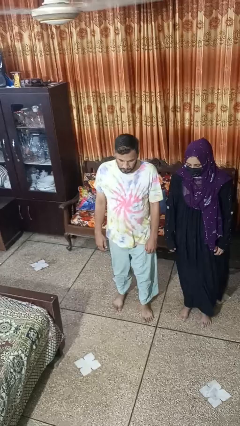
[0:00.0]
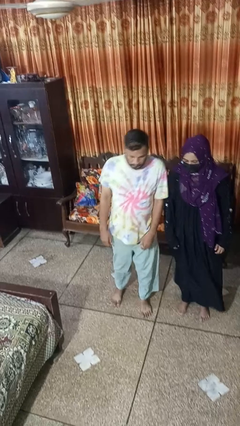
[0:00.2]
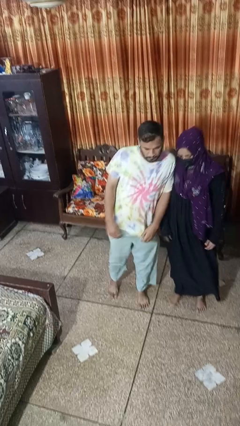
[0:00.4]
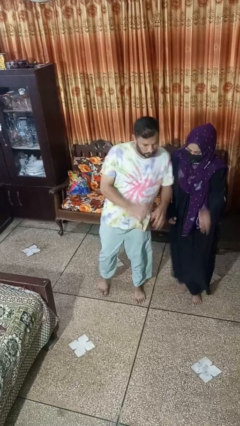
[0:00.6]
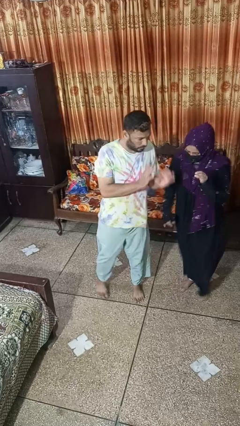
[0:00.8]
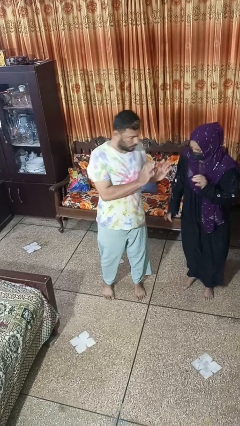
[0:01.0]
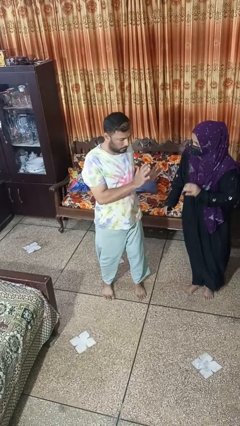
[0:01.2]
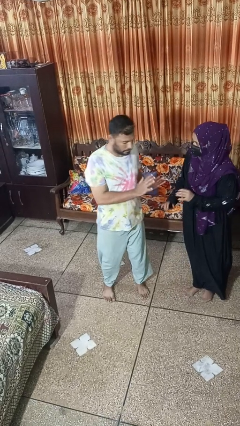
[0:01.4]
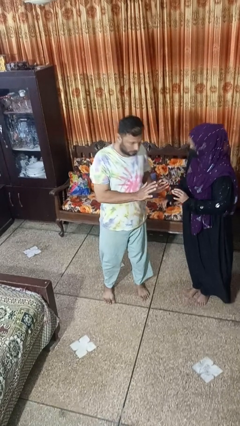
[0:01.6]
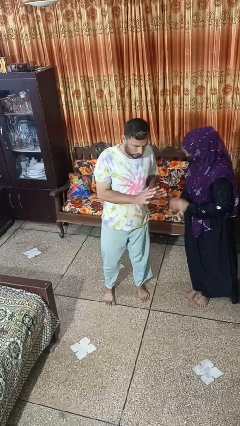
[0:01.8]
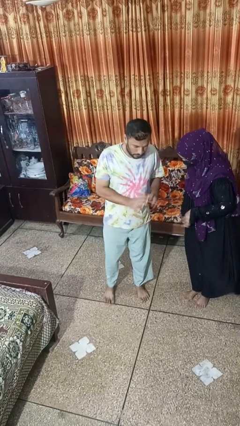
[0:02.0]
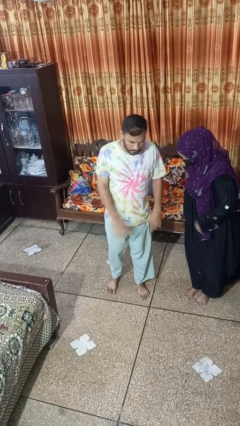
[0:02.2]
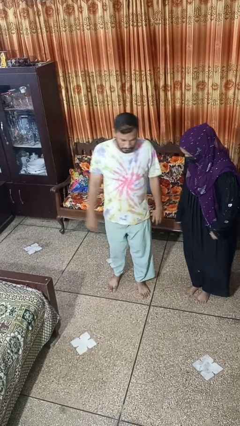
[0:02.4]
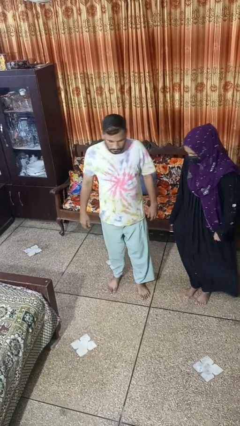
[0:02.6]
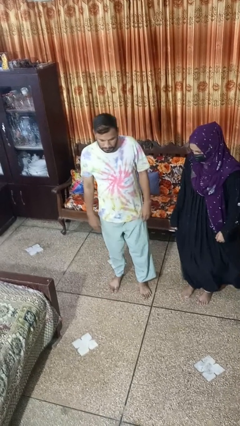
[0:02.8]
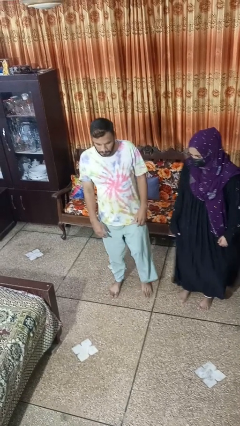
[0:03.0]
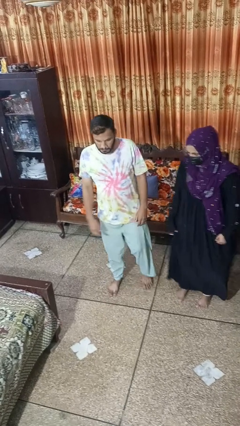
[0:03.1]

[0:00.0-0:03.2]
person bumps into person

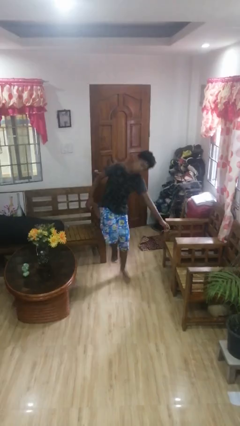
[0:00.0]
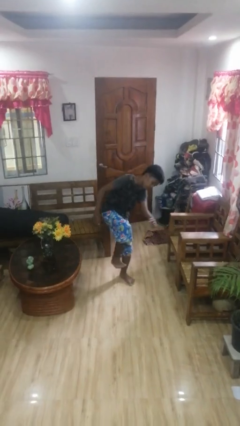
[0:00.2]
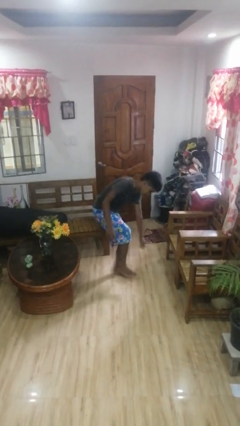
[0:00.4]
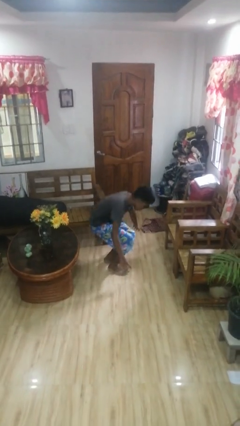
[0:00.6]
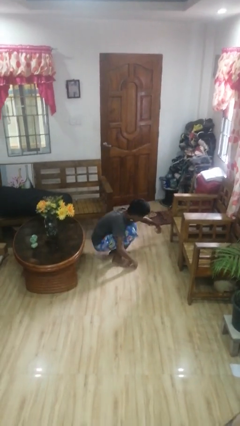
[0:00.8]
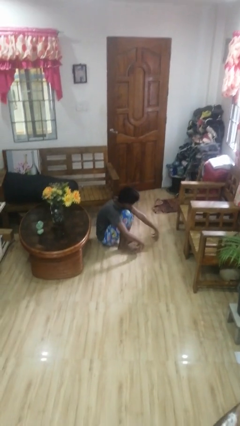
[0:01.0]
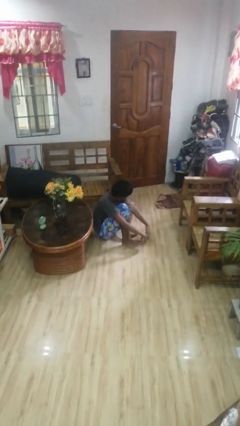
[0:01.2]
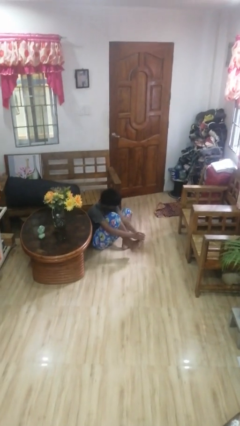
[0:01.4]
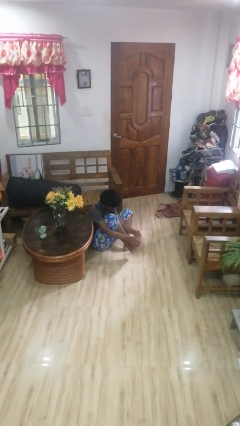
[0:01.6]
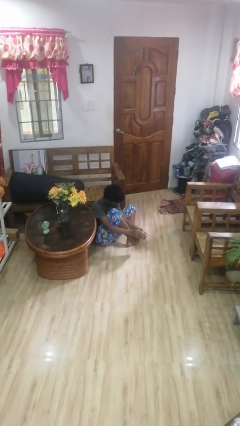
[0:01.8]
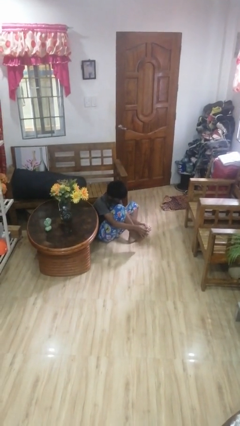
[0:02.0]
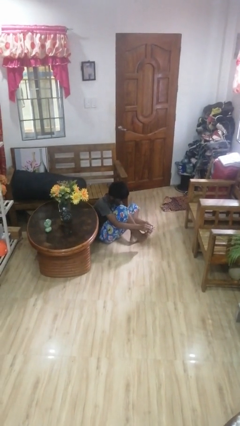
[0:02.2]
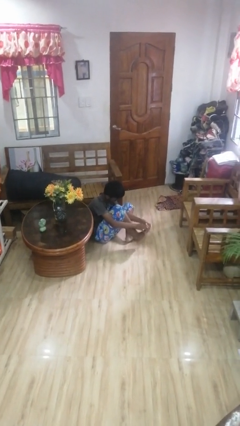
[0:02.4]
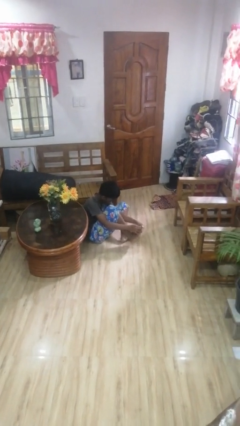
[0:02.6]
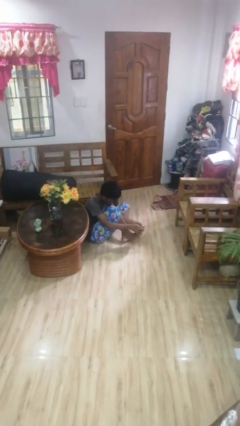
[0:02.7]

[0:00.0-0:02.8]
person lies down on floor

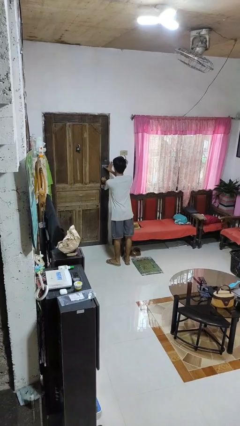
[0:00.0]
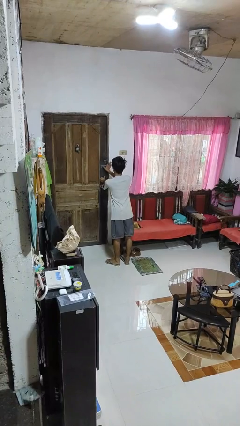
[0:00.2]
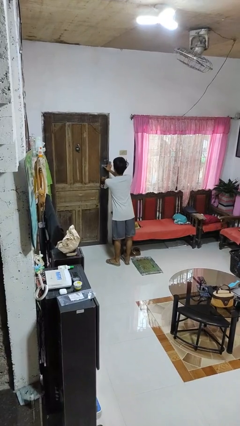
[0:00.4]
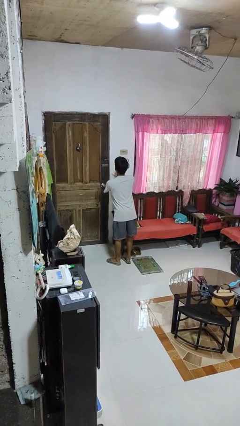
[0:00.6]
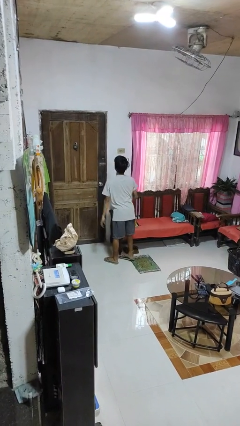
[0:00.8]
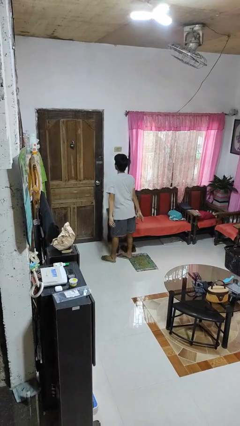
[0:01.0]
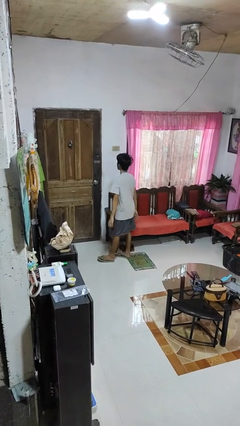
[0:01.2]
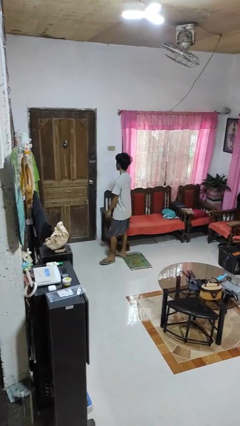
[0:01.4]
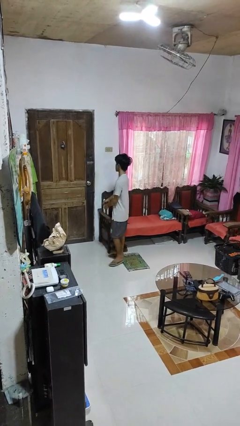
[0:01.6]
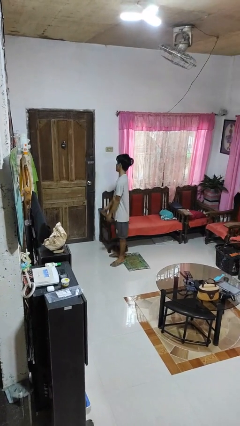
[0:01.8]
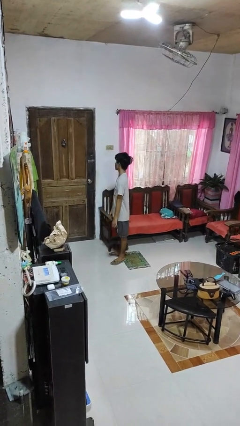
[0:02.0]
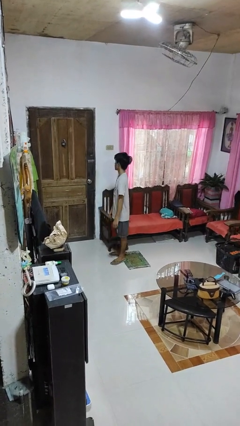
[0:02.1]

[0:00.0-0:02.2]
person locks door with keys

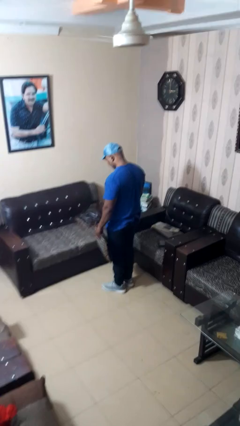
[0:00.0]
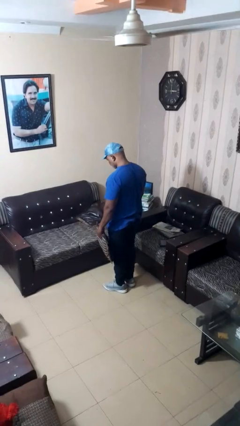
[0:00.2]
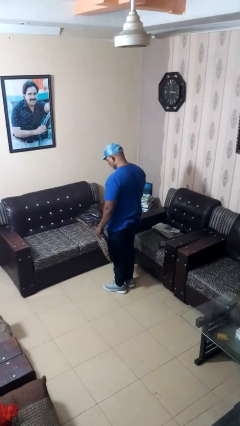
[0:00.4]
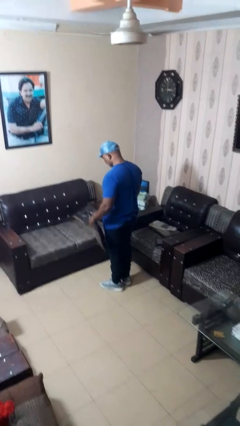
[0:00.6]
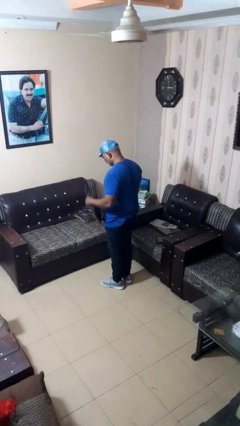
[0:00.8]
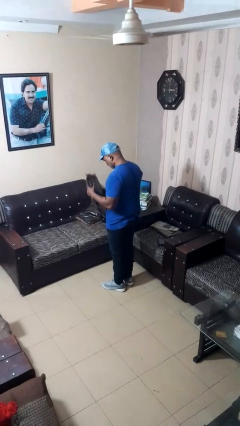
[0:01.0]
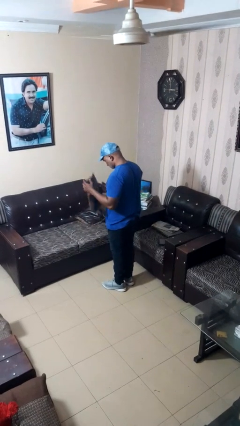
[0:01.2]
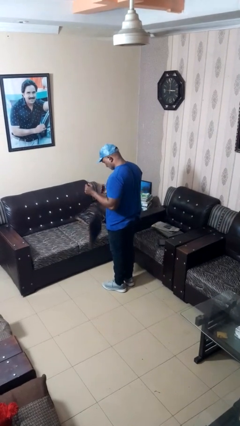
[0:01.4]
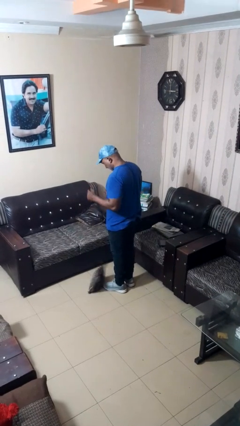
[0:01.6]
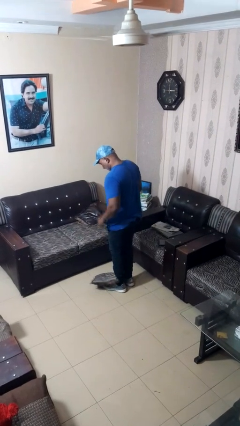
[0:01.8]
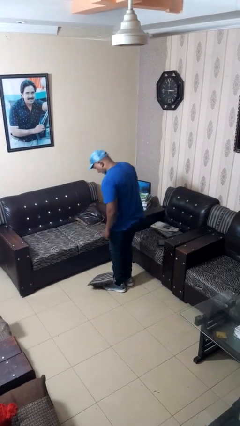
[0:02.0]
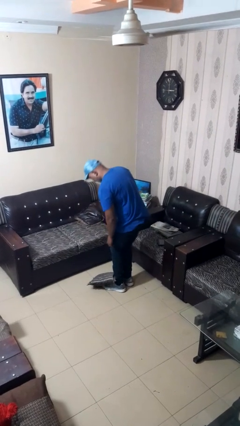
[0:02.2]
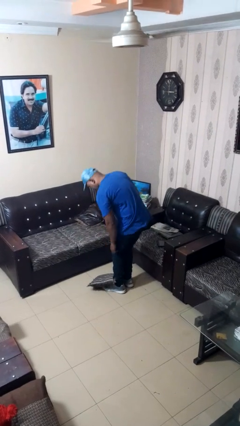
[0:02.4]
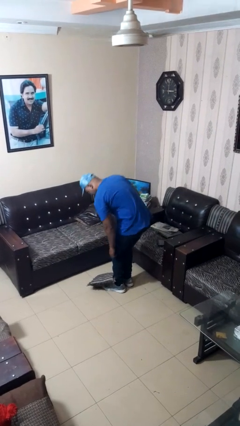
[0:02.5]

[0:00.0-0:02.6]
person drops object

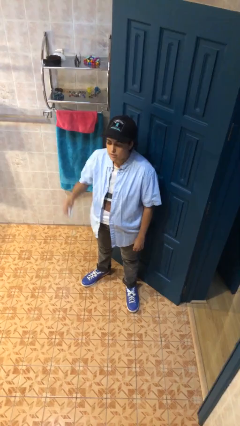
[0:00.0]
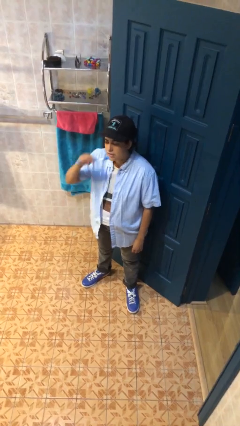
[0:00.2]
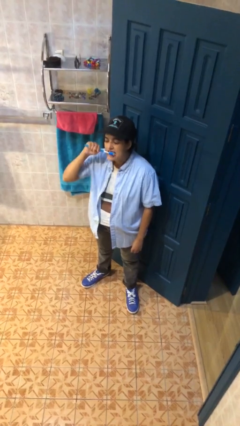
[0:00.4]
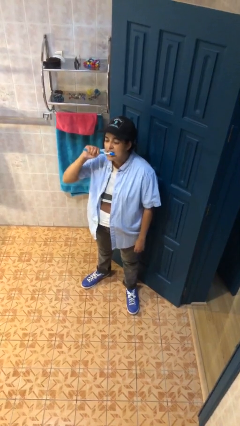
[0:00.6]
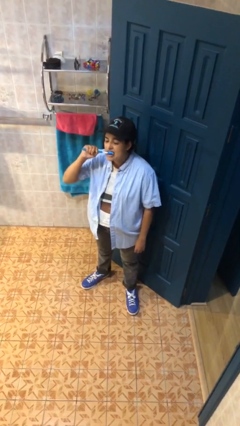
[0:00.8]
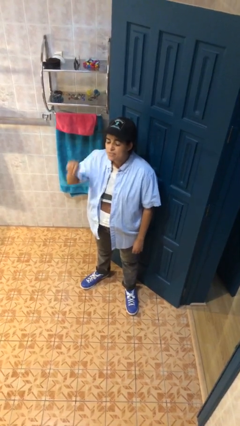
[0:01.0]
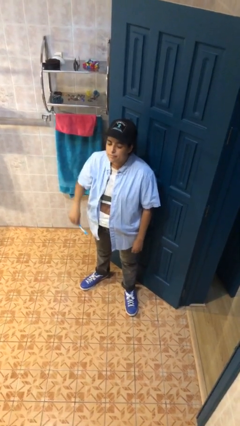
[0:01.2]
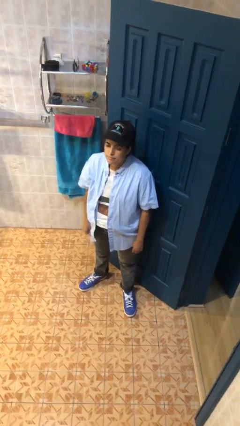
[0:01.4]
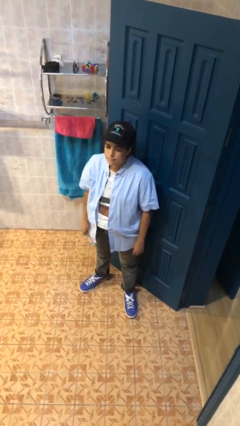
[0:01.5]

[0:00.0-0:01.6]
person brushes teeth

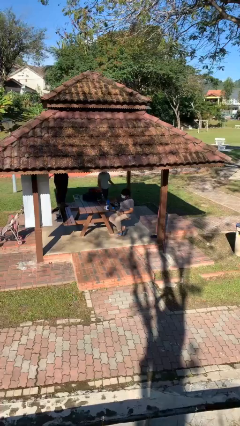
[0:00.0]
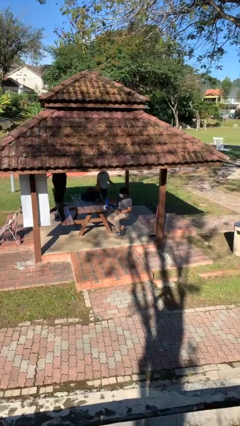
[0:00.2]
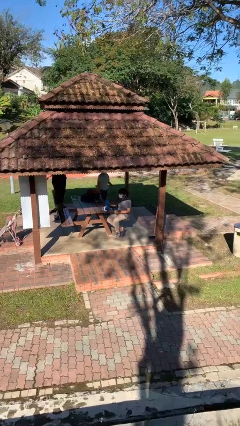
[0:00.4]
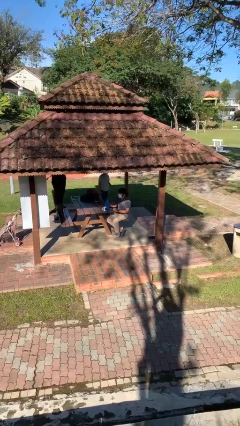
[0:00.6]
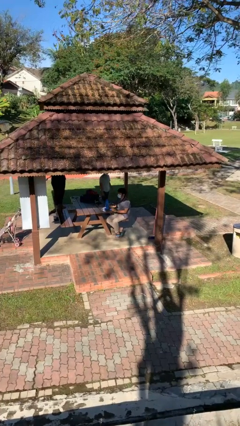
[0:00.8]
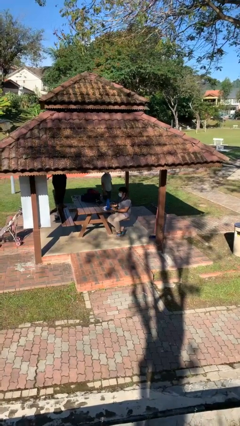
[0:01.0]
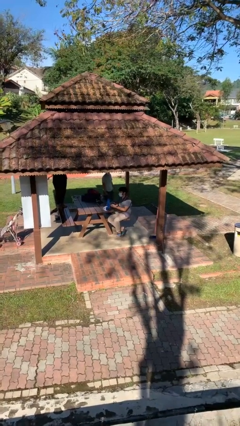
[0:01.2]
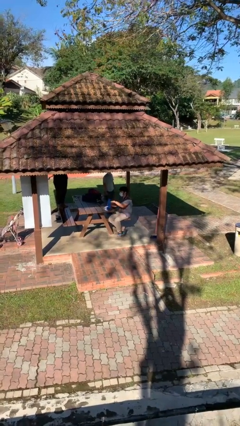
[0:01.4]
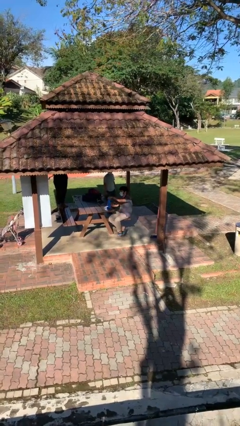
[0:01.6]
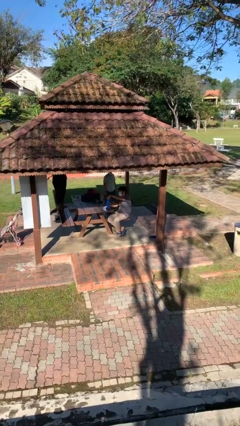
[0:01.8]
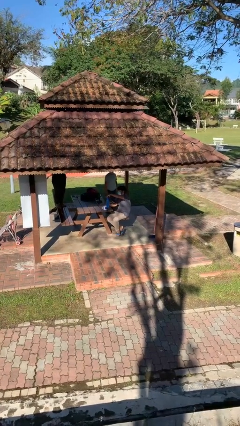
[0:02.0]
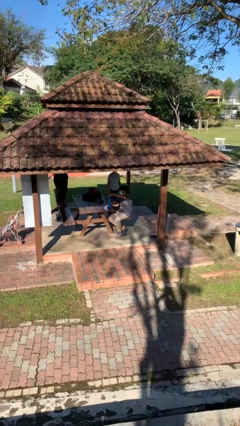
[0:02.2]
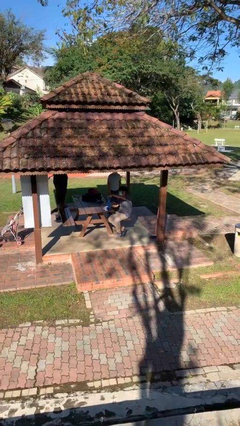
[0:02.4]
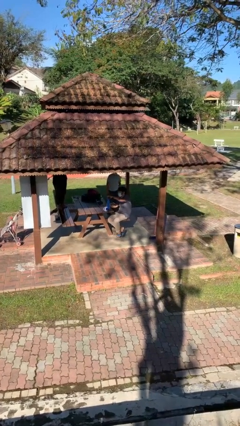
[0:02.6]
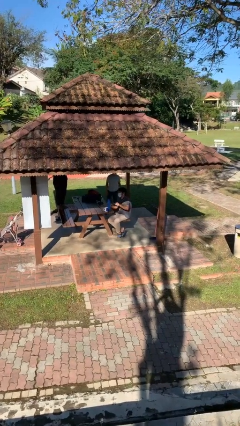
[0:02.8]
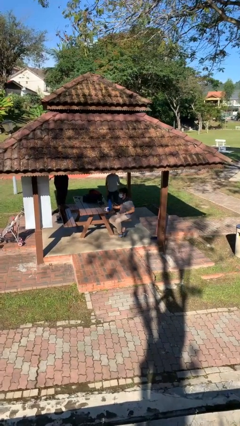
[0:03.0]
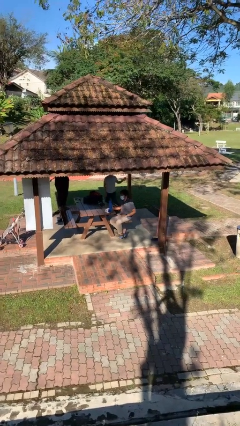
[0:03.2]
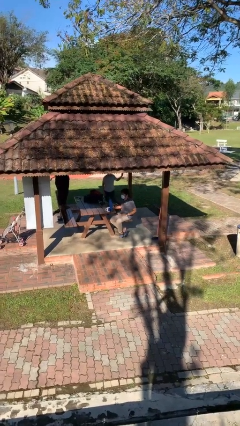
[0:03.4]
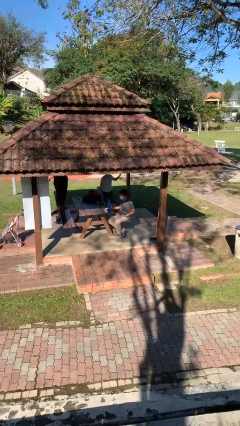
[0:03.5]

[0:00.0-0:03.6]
person screws lid to bottle

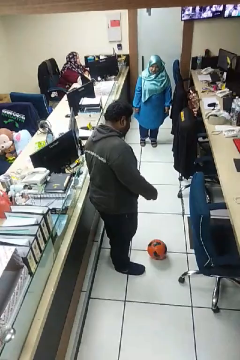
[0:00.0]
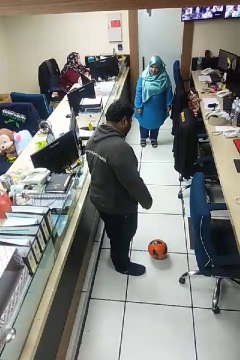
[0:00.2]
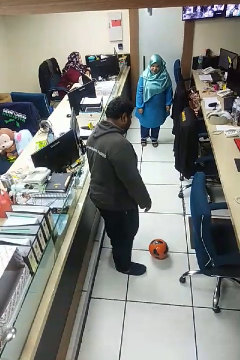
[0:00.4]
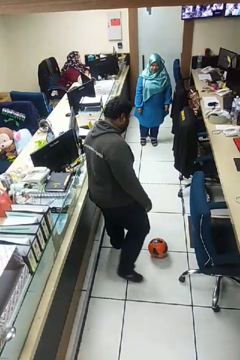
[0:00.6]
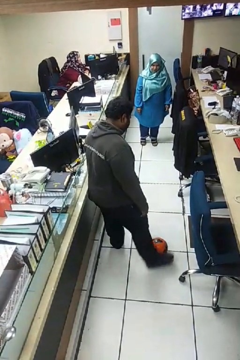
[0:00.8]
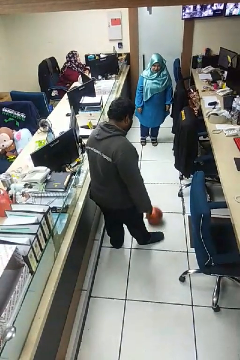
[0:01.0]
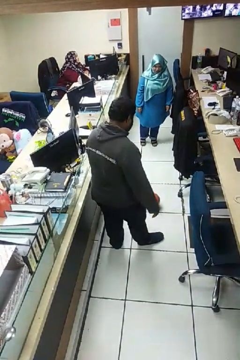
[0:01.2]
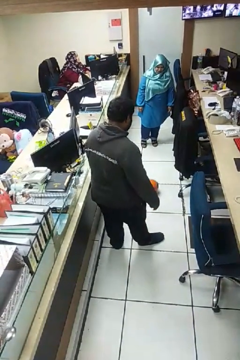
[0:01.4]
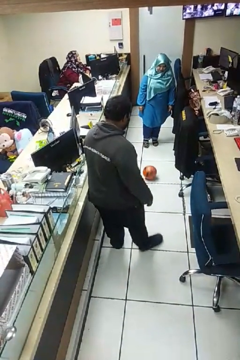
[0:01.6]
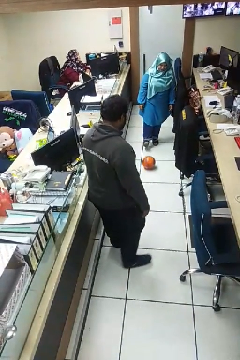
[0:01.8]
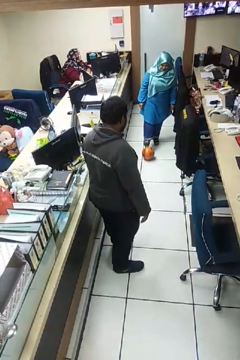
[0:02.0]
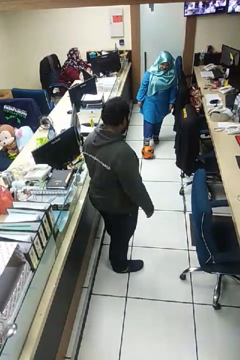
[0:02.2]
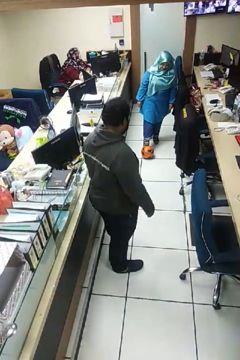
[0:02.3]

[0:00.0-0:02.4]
person kicks object to person
